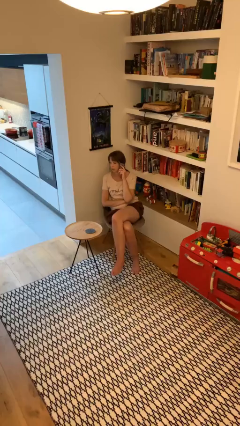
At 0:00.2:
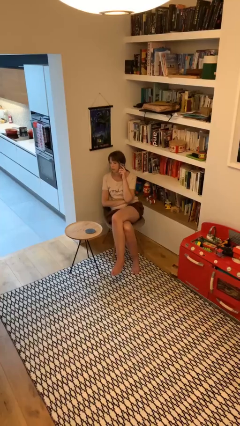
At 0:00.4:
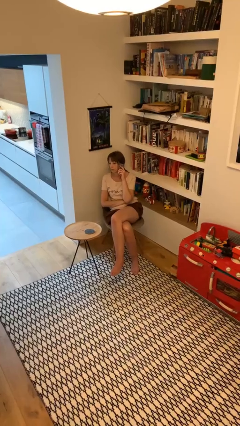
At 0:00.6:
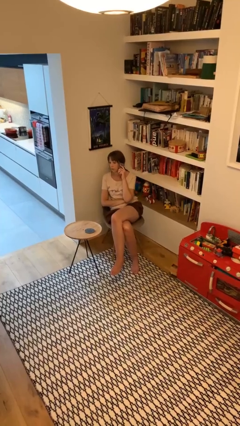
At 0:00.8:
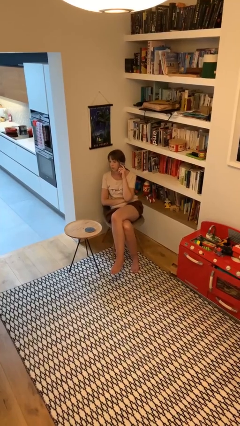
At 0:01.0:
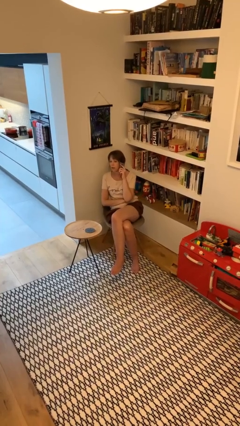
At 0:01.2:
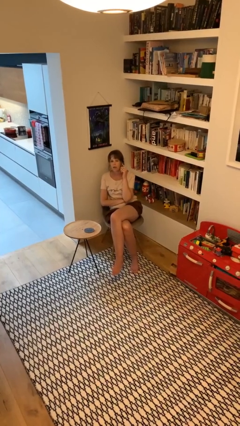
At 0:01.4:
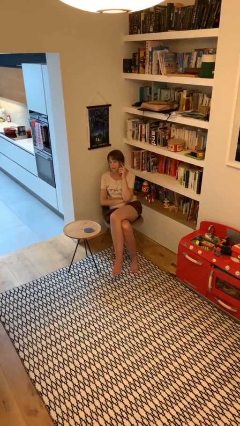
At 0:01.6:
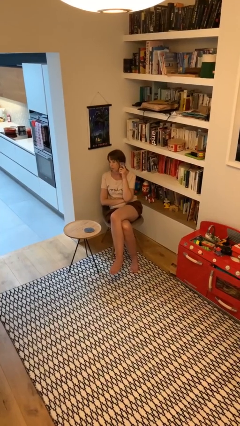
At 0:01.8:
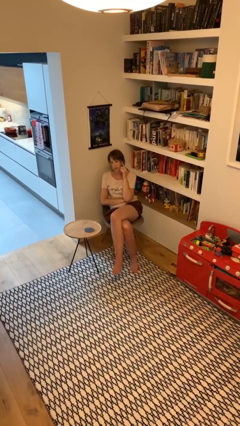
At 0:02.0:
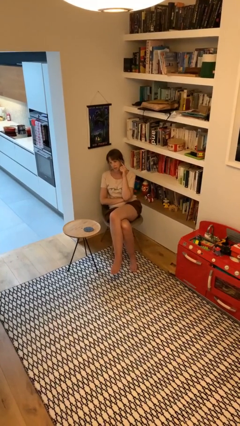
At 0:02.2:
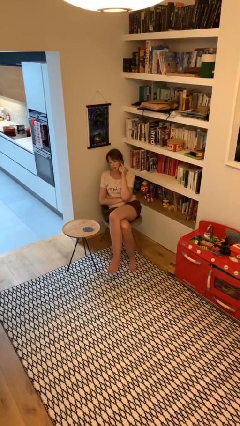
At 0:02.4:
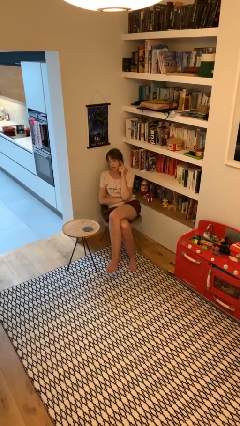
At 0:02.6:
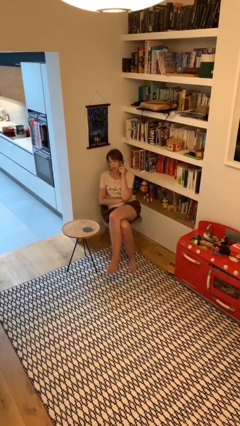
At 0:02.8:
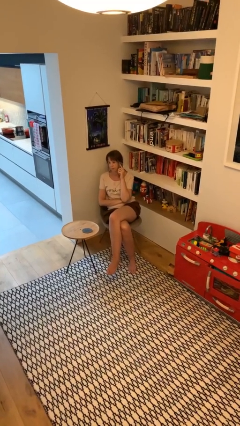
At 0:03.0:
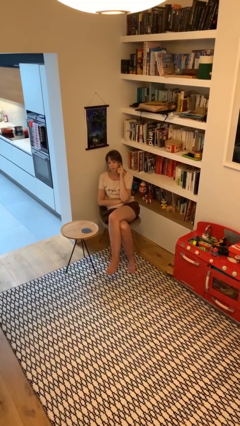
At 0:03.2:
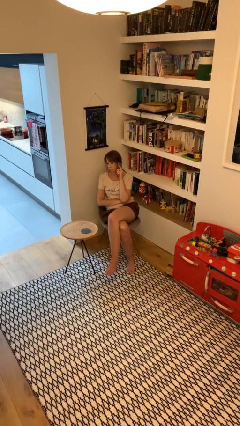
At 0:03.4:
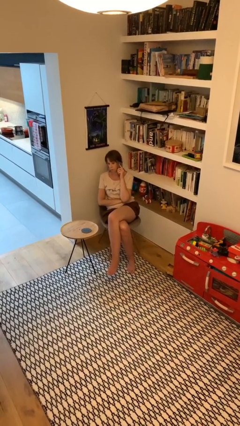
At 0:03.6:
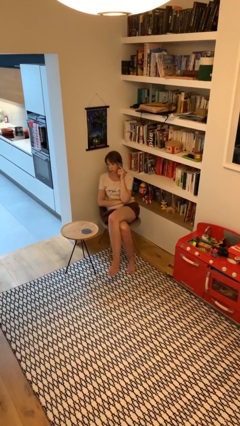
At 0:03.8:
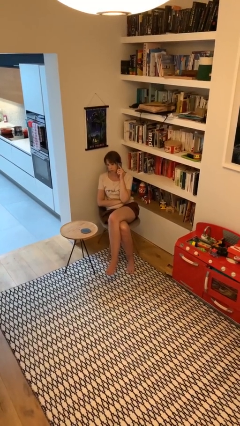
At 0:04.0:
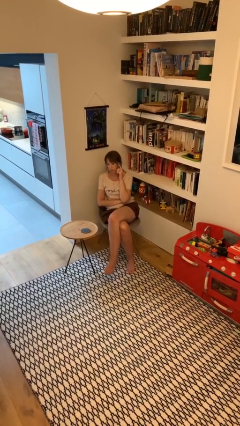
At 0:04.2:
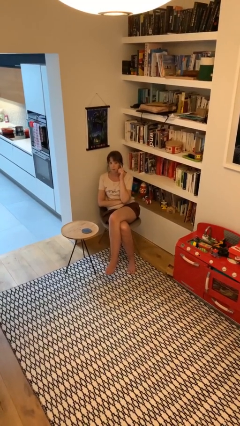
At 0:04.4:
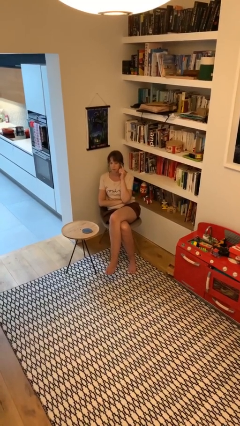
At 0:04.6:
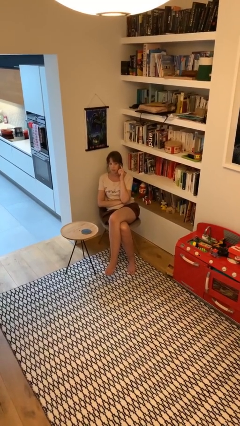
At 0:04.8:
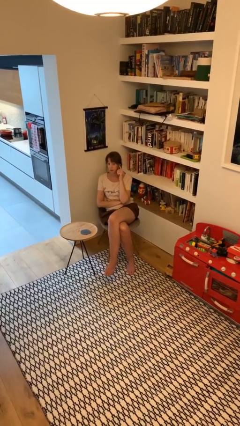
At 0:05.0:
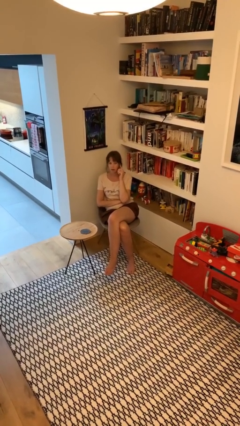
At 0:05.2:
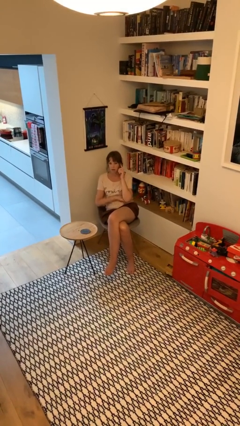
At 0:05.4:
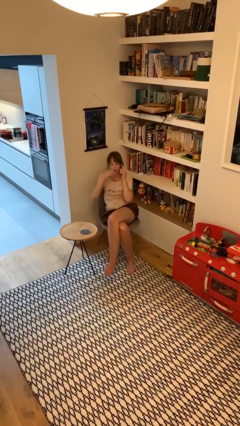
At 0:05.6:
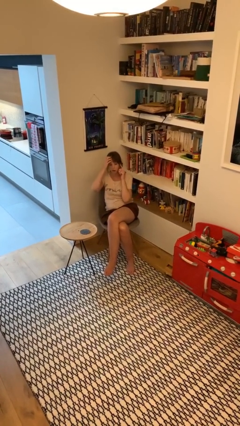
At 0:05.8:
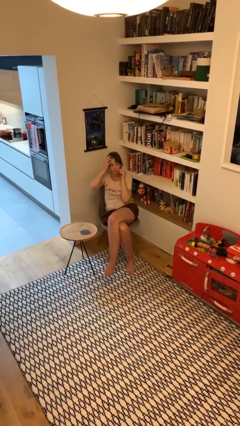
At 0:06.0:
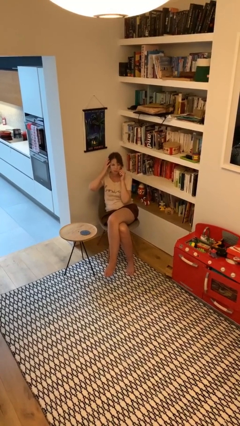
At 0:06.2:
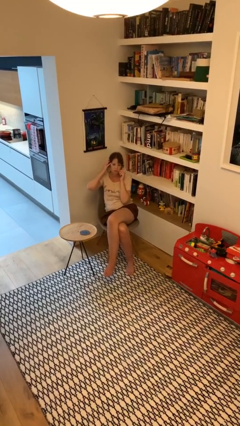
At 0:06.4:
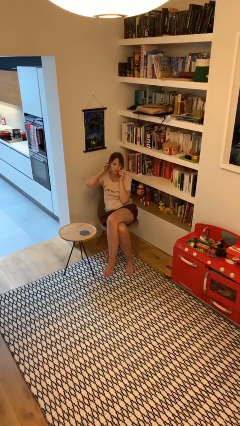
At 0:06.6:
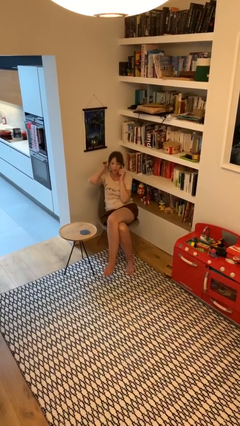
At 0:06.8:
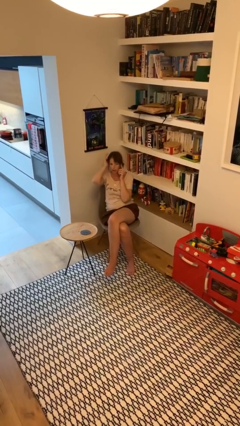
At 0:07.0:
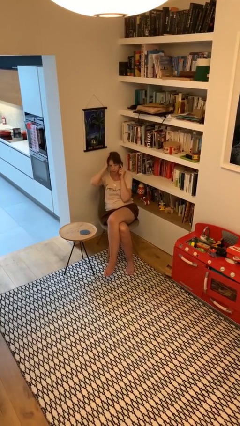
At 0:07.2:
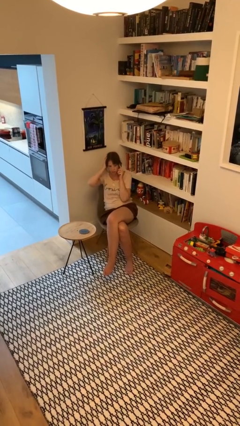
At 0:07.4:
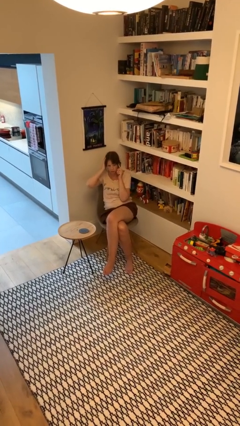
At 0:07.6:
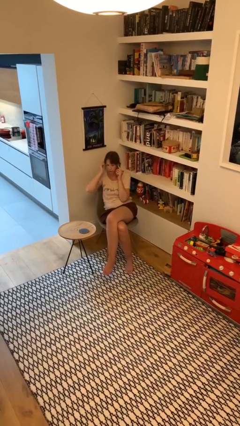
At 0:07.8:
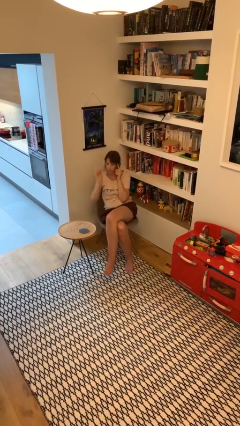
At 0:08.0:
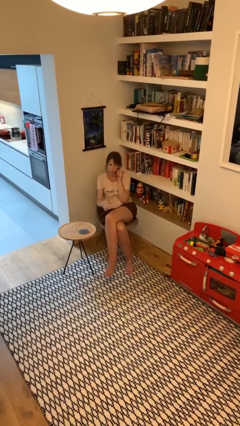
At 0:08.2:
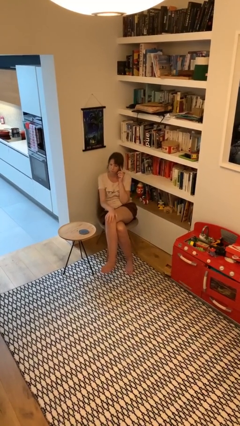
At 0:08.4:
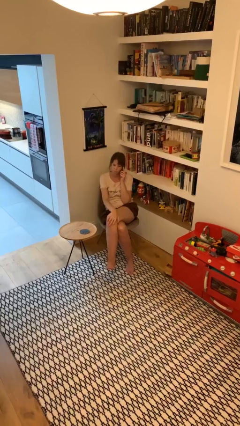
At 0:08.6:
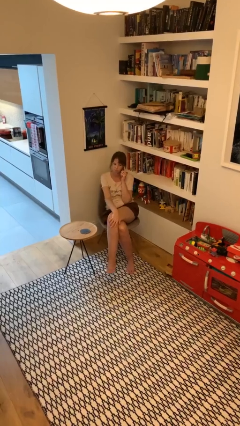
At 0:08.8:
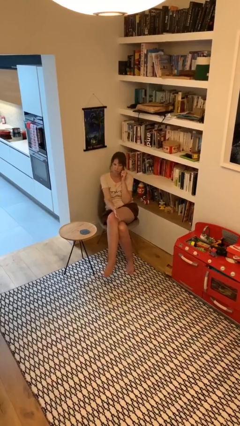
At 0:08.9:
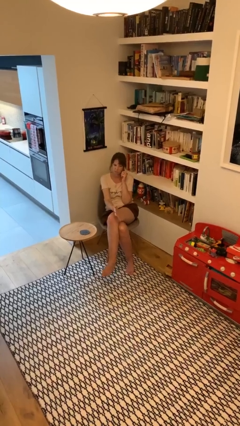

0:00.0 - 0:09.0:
person talks on phone

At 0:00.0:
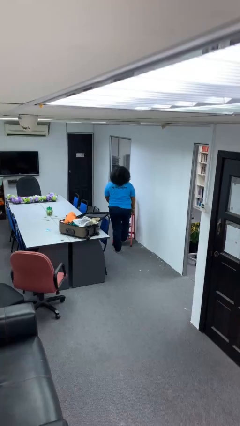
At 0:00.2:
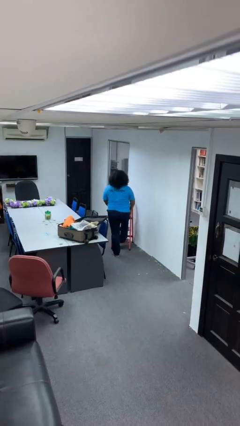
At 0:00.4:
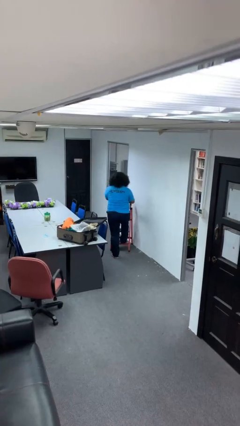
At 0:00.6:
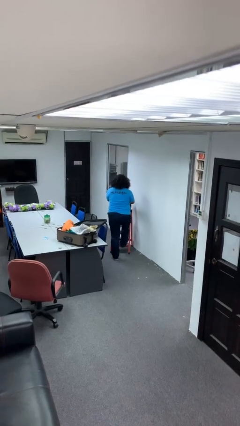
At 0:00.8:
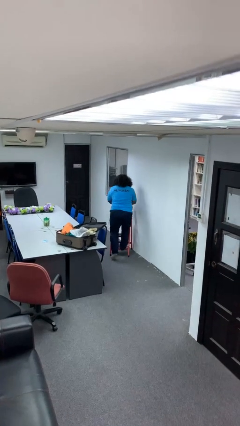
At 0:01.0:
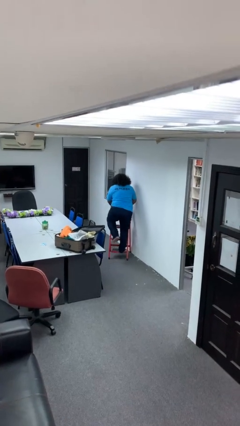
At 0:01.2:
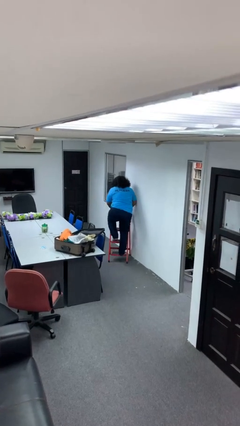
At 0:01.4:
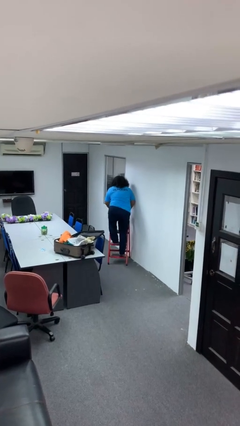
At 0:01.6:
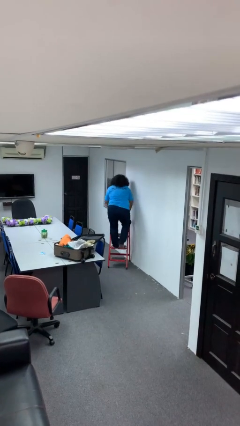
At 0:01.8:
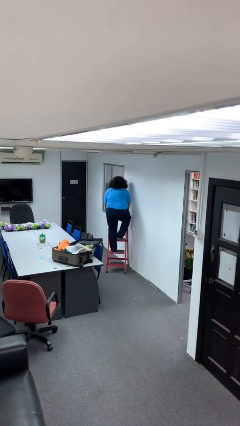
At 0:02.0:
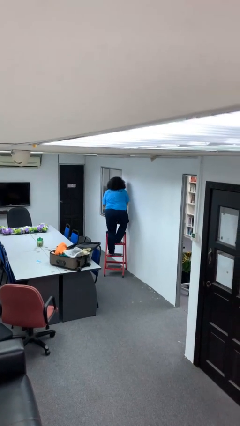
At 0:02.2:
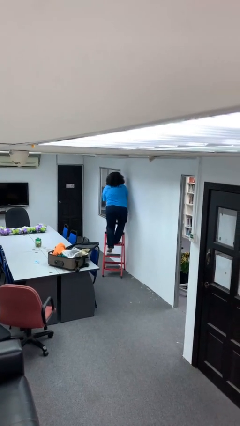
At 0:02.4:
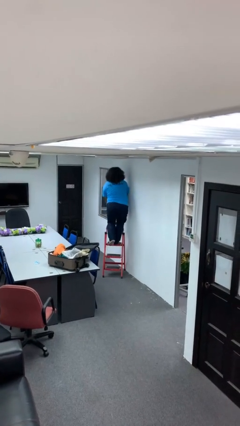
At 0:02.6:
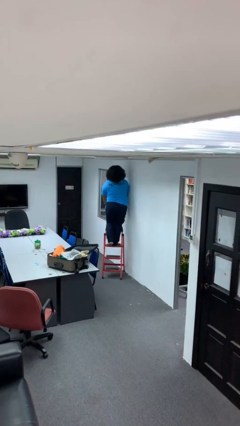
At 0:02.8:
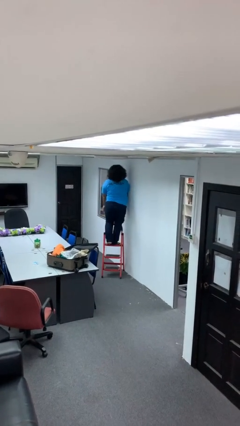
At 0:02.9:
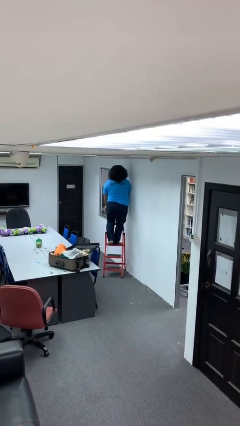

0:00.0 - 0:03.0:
person climbs up ladder

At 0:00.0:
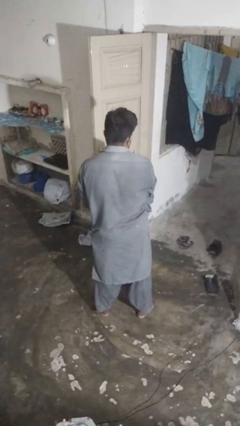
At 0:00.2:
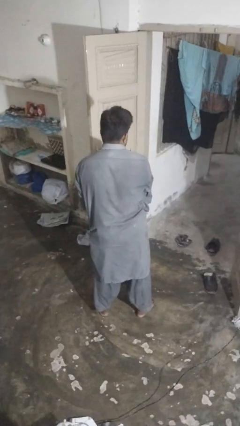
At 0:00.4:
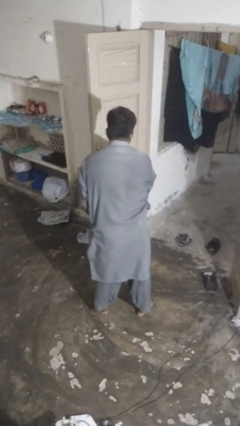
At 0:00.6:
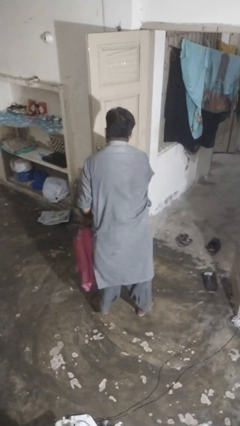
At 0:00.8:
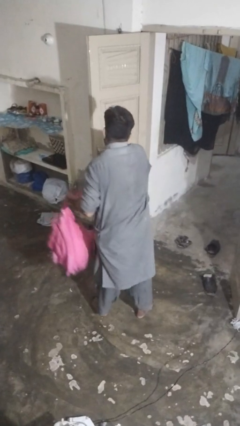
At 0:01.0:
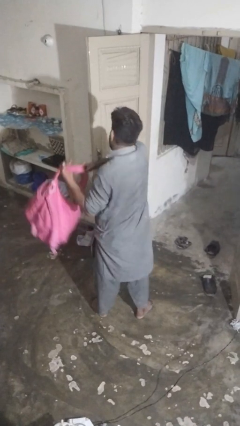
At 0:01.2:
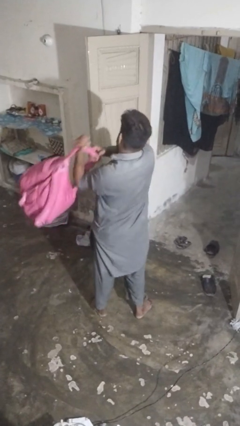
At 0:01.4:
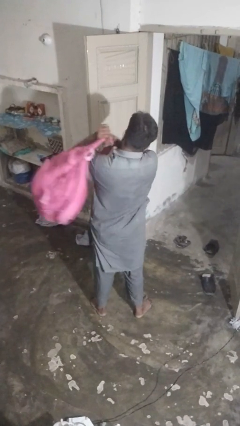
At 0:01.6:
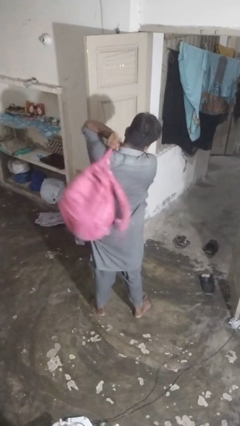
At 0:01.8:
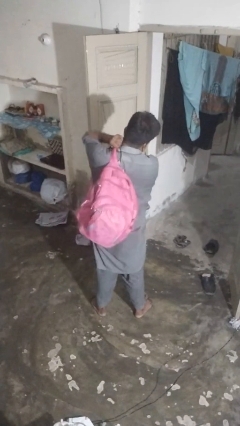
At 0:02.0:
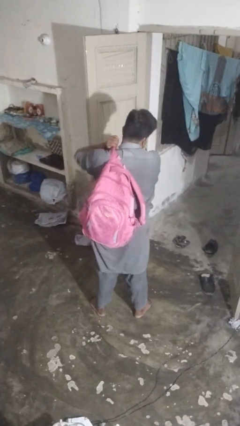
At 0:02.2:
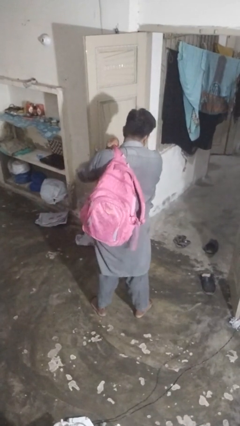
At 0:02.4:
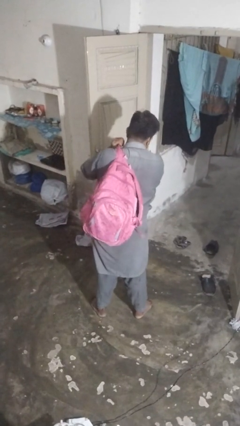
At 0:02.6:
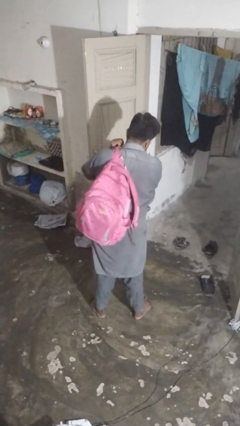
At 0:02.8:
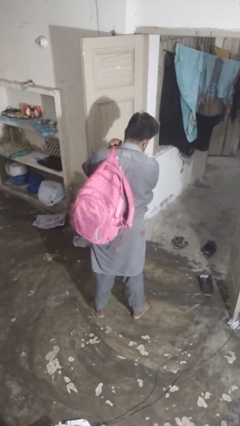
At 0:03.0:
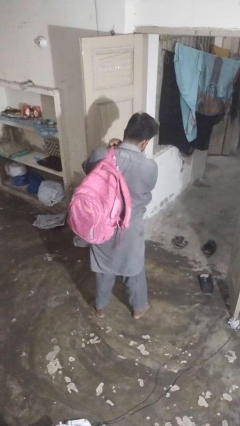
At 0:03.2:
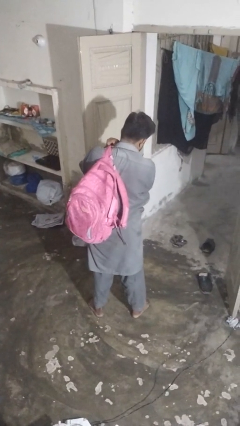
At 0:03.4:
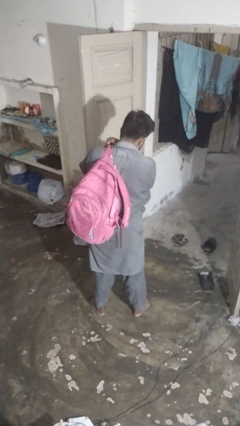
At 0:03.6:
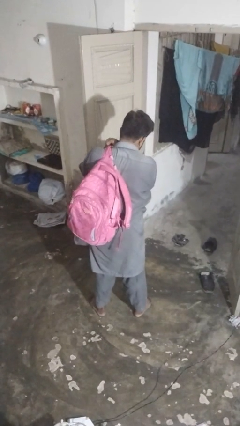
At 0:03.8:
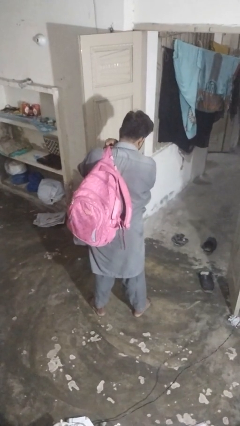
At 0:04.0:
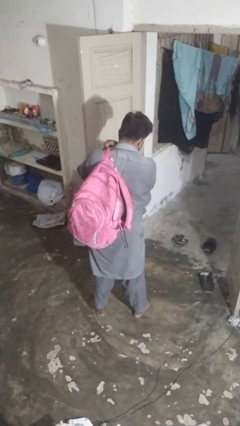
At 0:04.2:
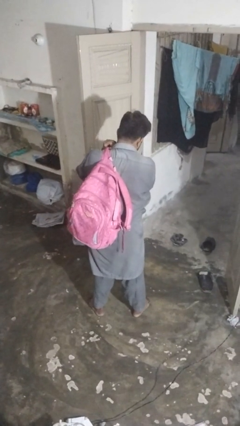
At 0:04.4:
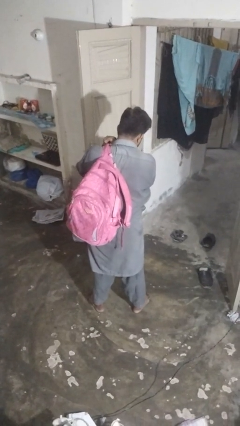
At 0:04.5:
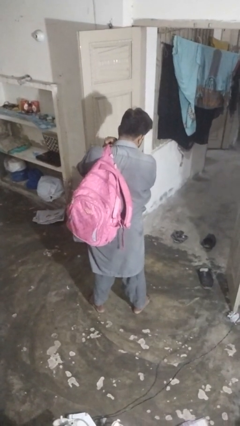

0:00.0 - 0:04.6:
person puts on backpack

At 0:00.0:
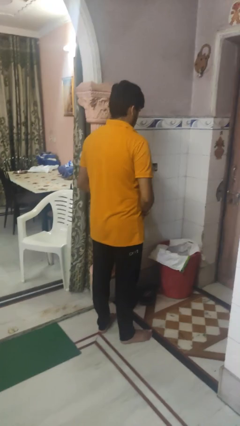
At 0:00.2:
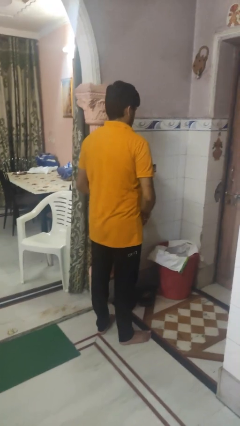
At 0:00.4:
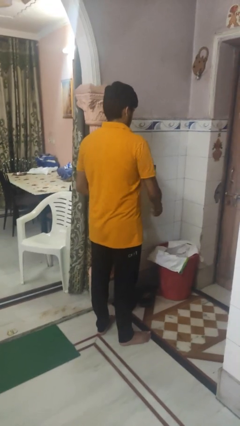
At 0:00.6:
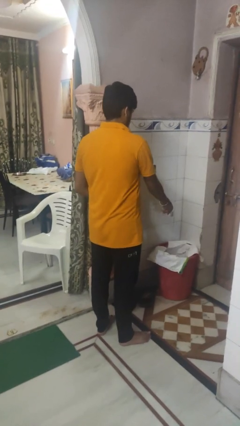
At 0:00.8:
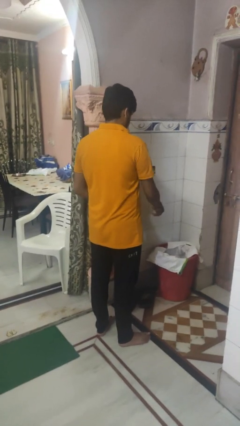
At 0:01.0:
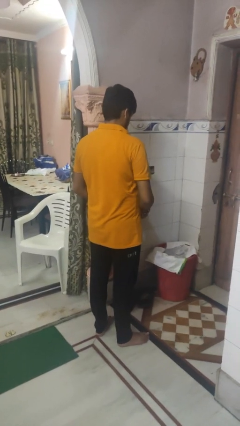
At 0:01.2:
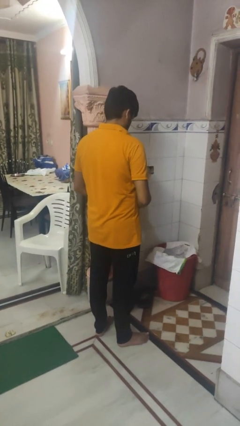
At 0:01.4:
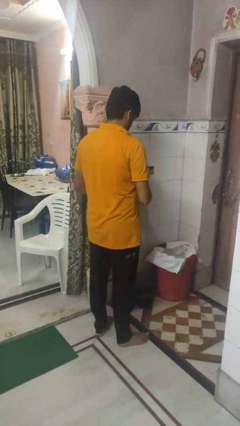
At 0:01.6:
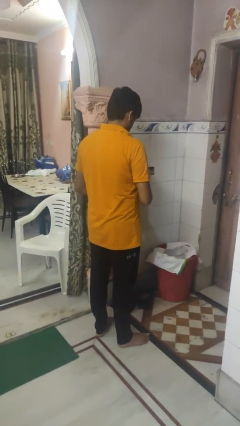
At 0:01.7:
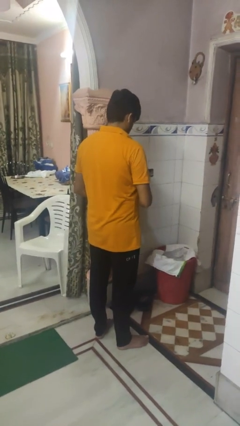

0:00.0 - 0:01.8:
person discards trash
